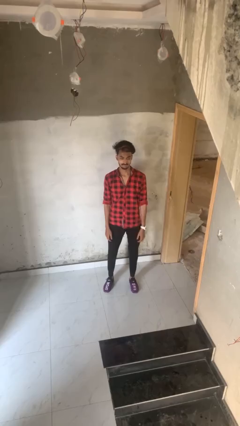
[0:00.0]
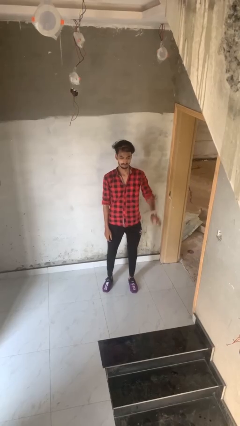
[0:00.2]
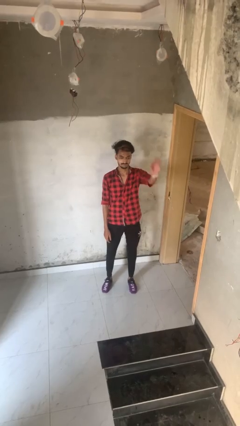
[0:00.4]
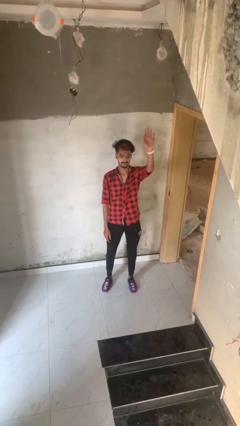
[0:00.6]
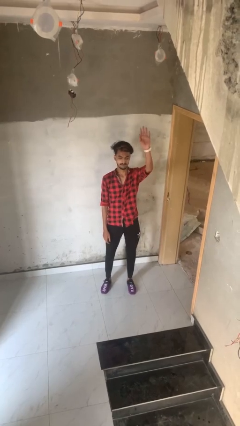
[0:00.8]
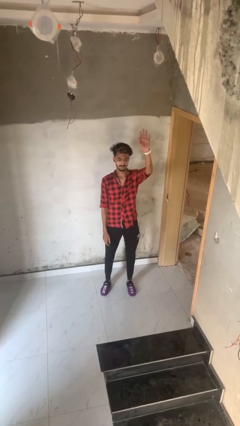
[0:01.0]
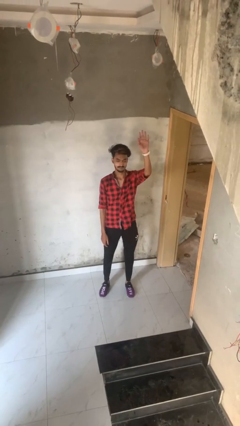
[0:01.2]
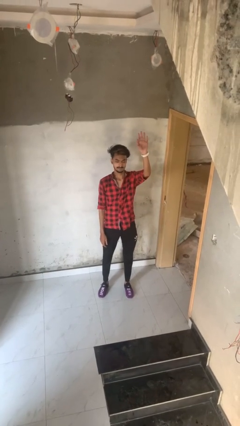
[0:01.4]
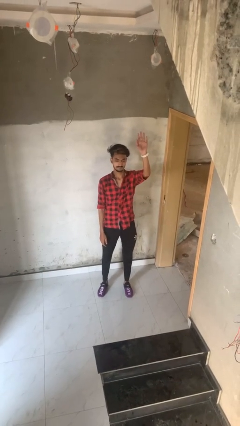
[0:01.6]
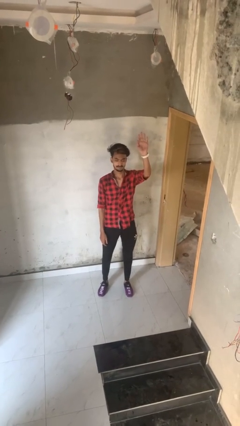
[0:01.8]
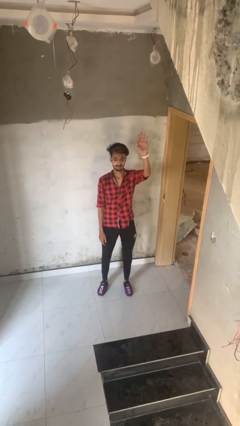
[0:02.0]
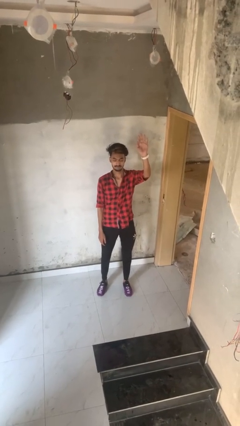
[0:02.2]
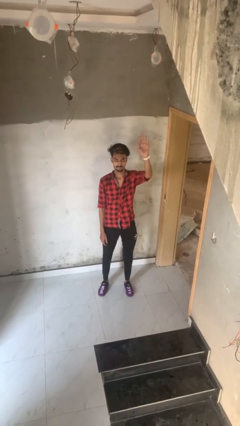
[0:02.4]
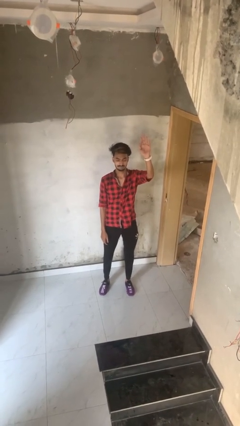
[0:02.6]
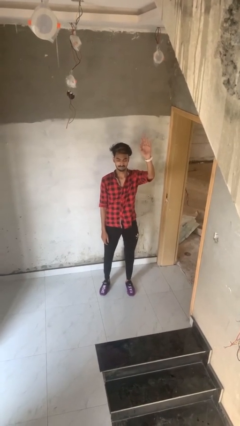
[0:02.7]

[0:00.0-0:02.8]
person gestures raise hand

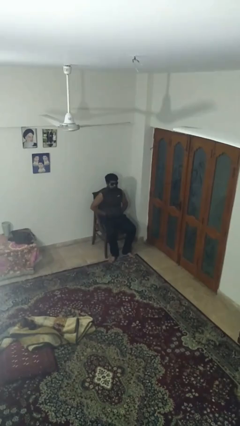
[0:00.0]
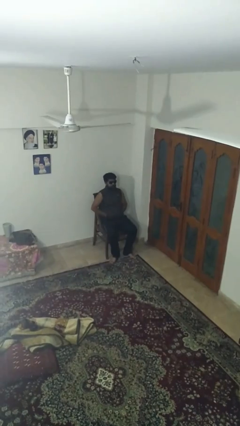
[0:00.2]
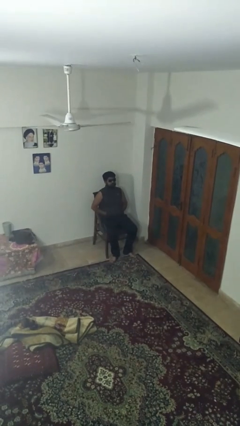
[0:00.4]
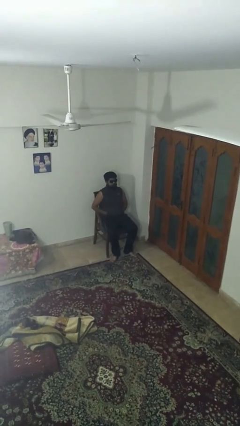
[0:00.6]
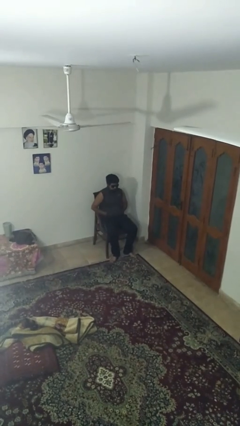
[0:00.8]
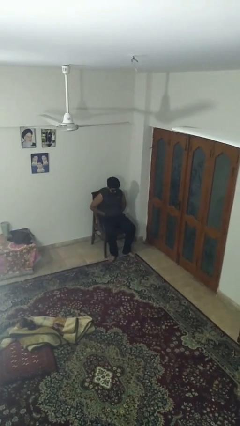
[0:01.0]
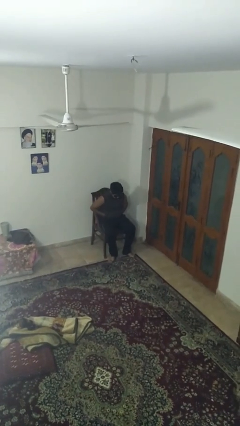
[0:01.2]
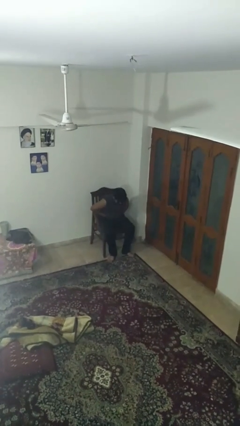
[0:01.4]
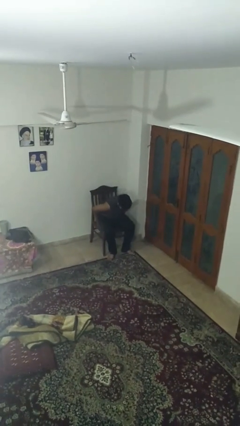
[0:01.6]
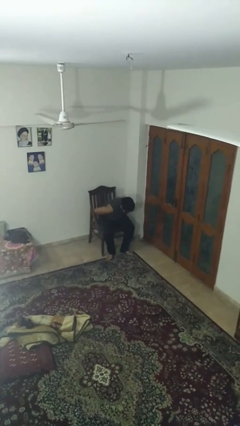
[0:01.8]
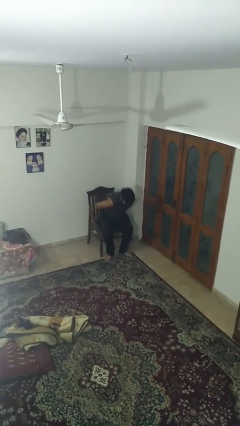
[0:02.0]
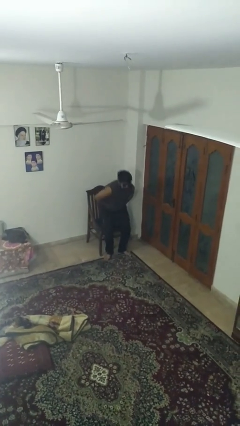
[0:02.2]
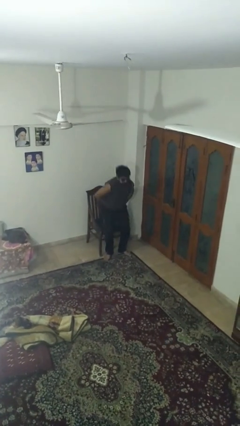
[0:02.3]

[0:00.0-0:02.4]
person stands up

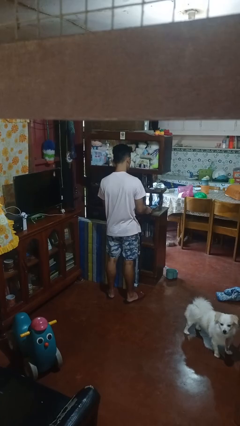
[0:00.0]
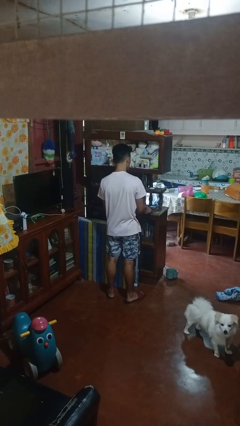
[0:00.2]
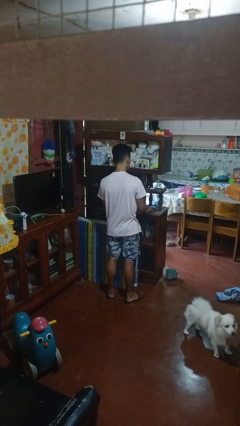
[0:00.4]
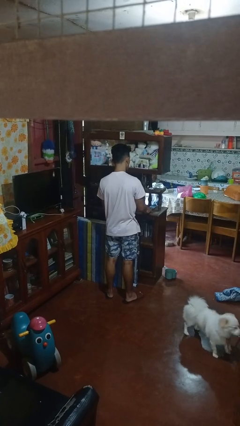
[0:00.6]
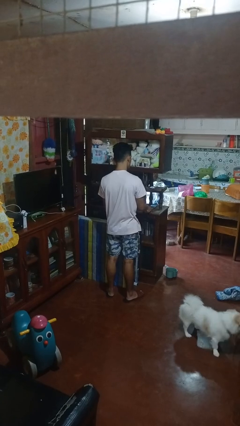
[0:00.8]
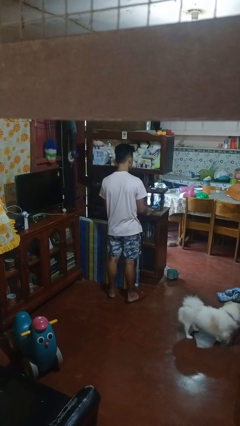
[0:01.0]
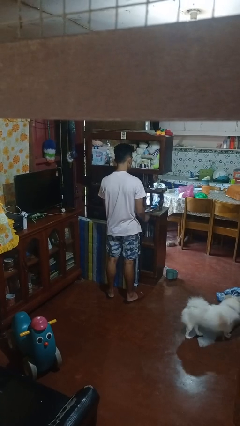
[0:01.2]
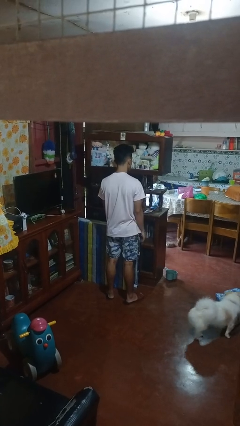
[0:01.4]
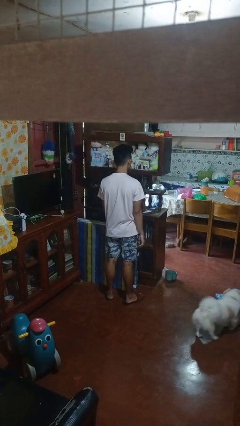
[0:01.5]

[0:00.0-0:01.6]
person puts down object on shelf

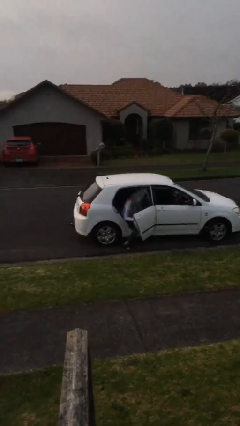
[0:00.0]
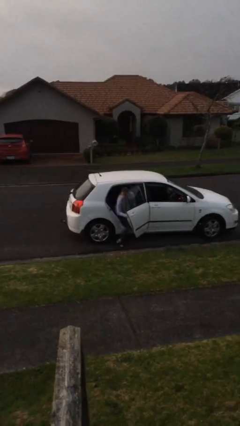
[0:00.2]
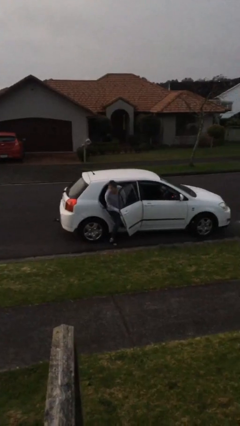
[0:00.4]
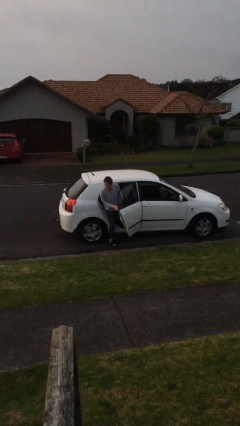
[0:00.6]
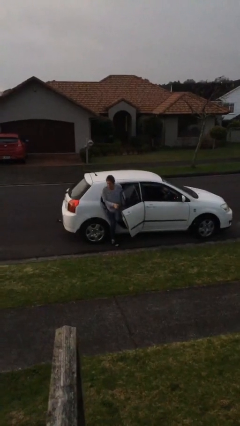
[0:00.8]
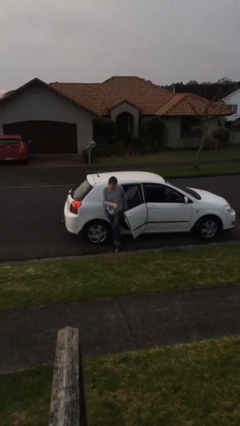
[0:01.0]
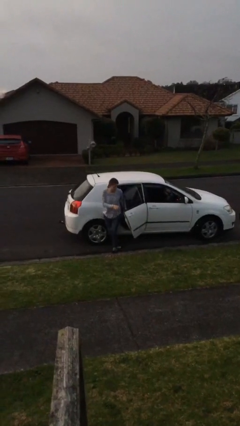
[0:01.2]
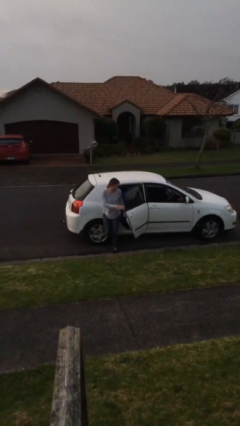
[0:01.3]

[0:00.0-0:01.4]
person exits car

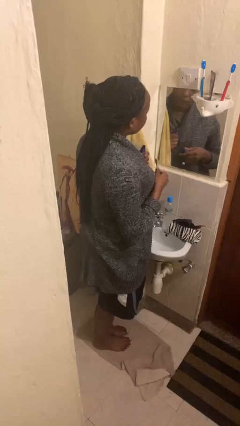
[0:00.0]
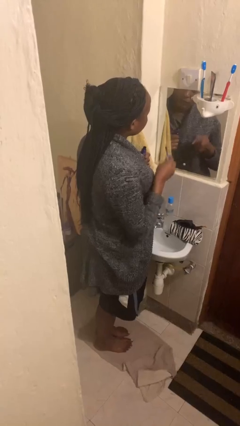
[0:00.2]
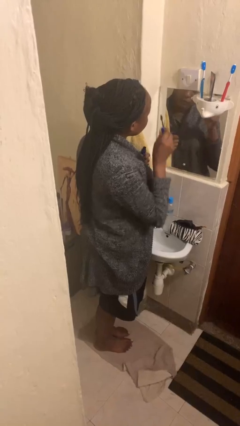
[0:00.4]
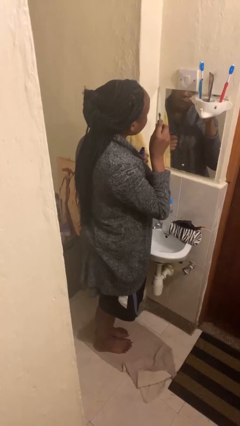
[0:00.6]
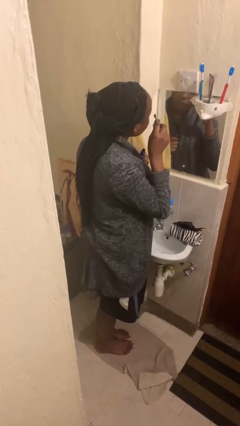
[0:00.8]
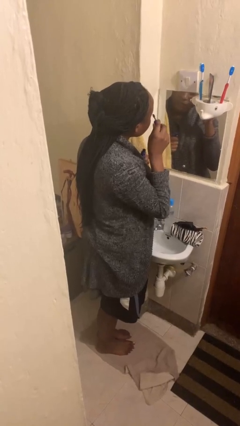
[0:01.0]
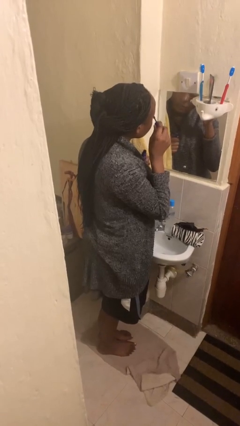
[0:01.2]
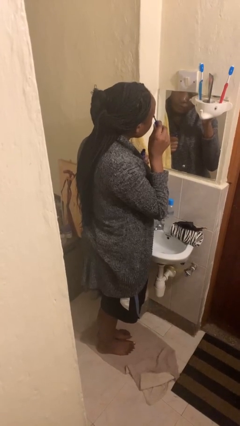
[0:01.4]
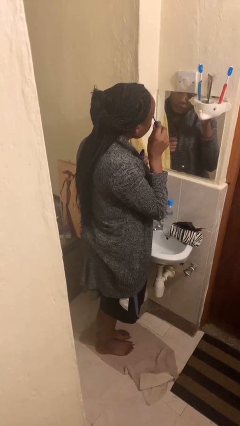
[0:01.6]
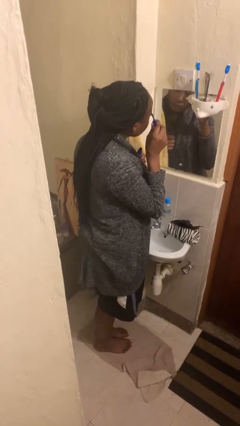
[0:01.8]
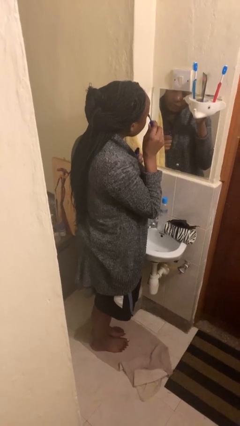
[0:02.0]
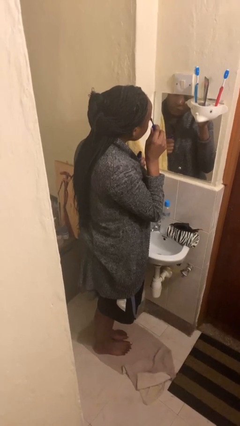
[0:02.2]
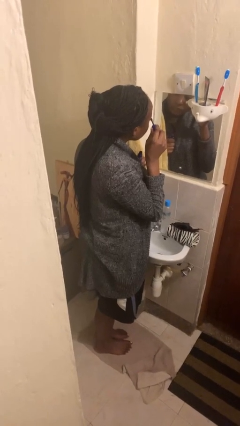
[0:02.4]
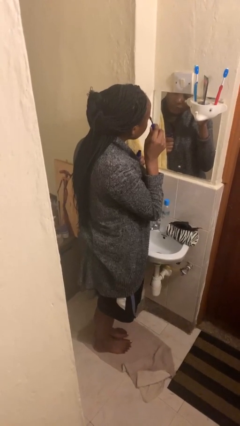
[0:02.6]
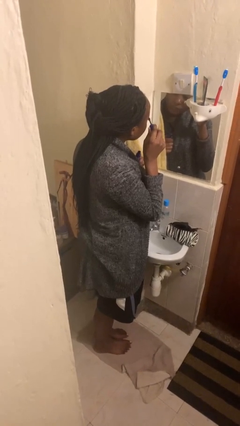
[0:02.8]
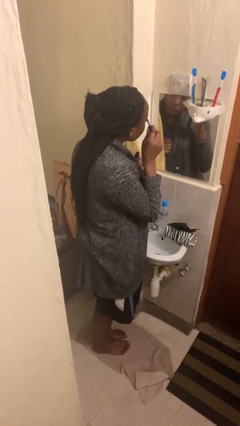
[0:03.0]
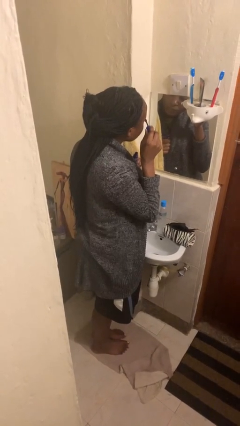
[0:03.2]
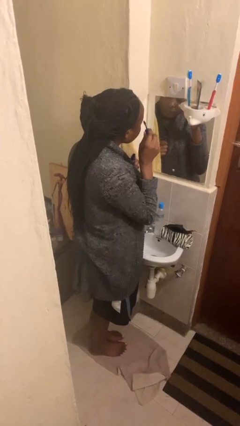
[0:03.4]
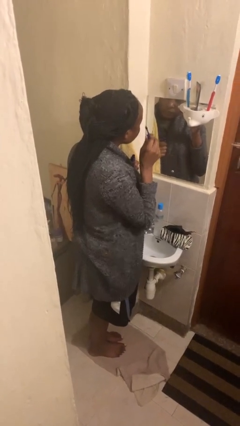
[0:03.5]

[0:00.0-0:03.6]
person applies eye makeup

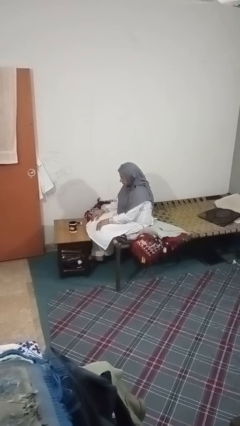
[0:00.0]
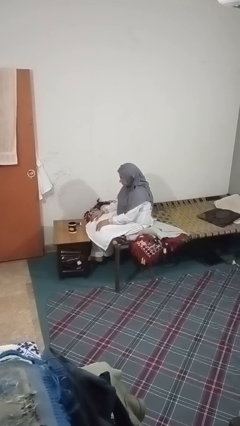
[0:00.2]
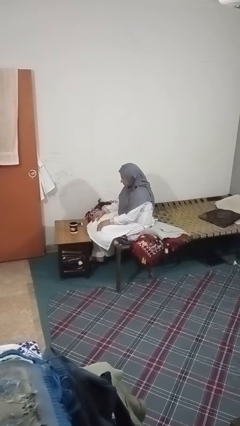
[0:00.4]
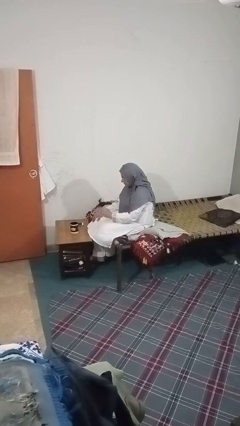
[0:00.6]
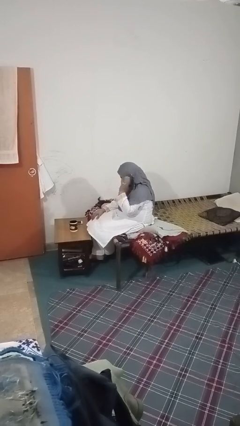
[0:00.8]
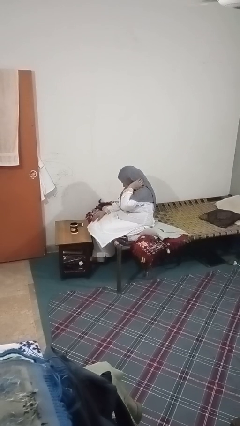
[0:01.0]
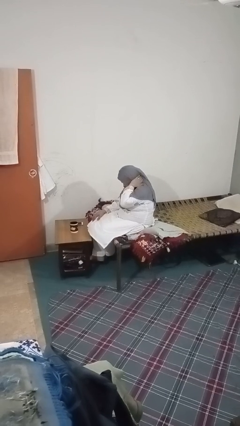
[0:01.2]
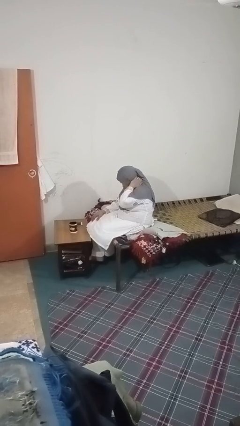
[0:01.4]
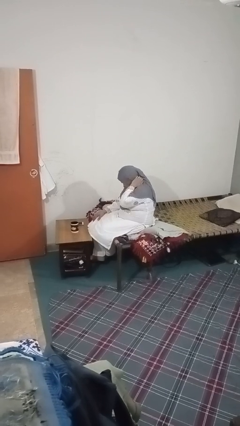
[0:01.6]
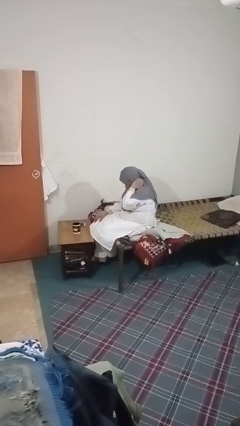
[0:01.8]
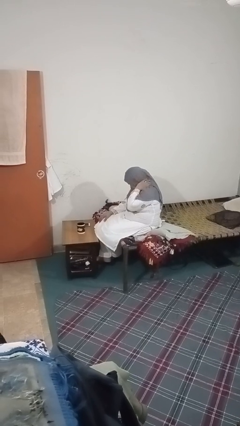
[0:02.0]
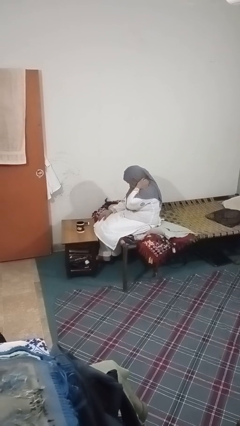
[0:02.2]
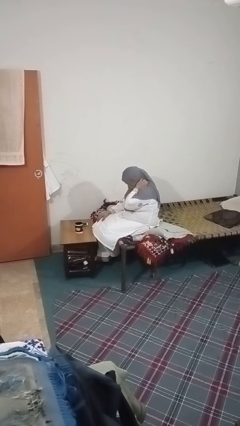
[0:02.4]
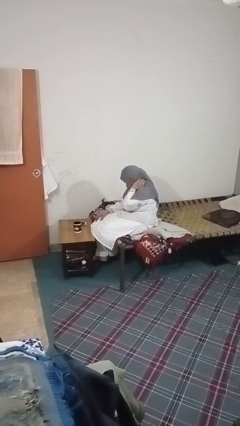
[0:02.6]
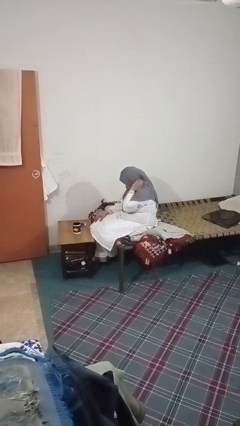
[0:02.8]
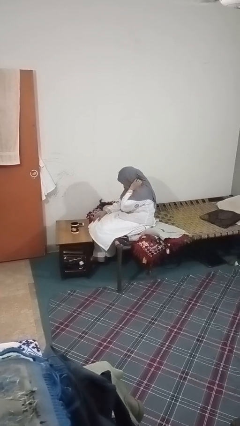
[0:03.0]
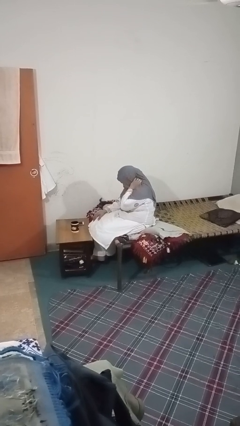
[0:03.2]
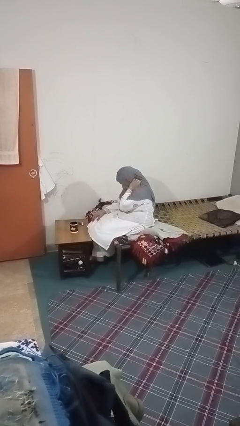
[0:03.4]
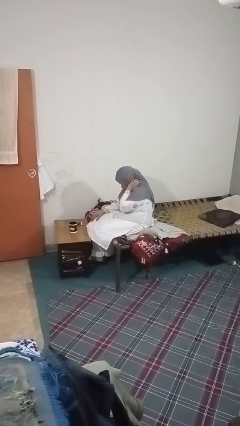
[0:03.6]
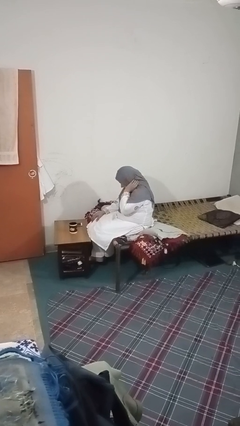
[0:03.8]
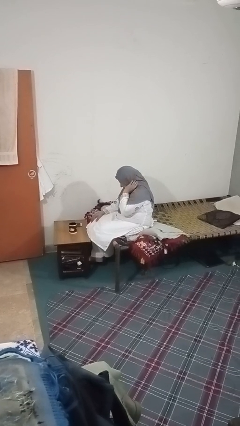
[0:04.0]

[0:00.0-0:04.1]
person rubs neck

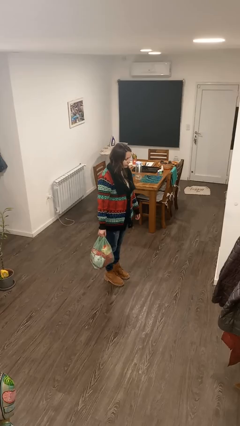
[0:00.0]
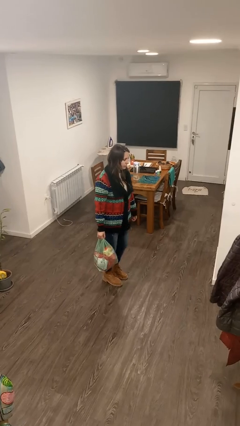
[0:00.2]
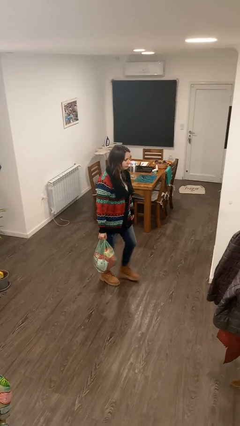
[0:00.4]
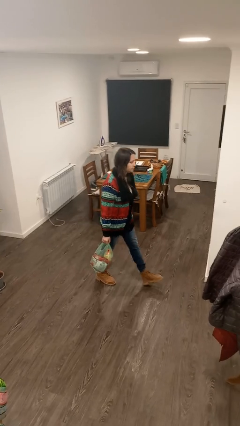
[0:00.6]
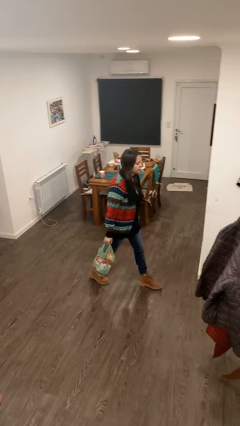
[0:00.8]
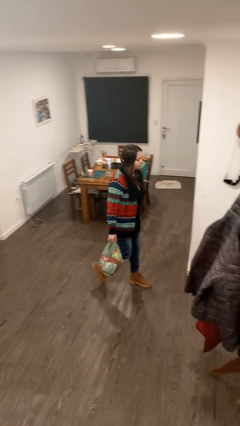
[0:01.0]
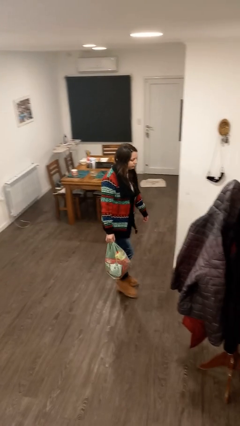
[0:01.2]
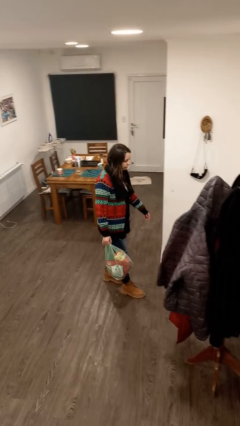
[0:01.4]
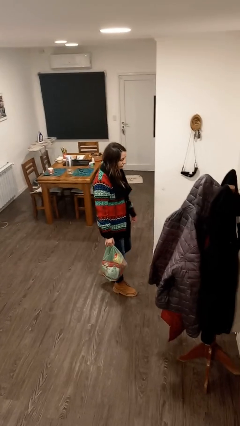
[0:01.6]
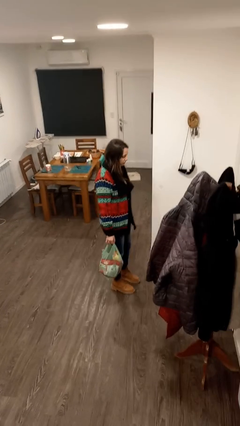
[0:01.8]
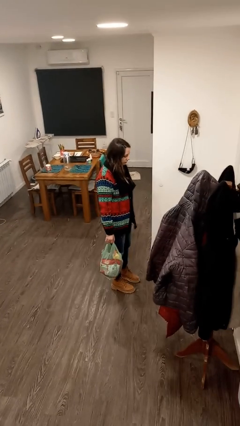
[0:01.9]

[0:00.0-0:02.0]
person carries groceries
